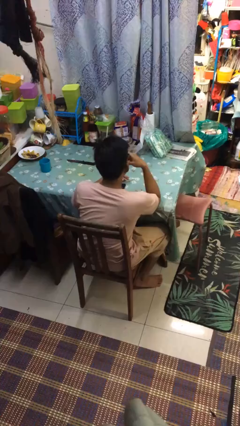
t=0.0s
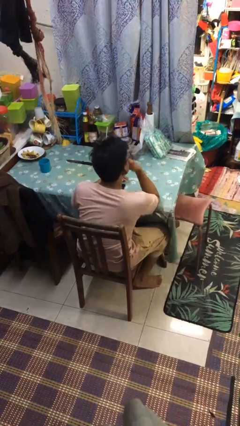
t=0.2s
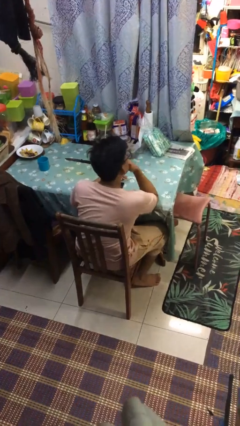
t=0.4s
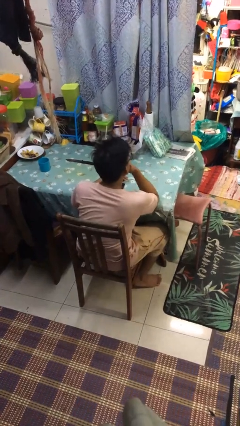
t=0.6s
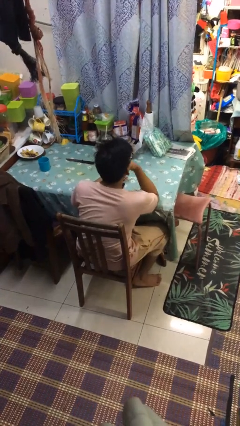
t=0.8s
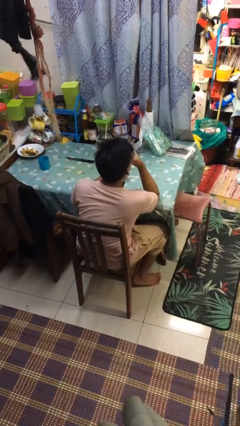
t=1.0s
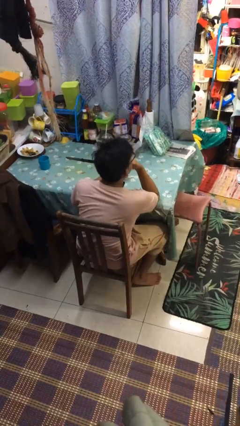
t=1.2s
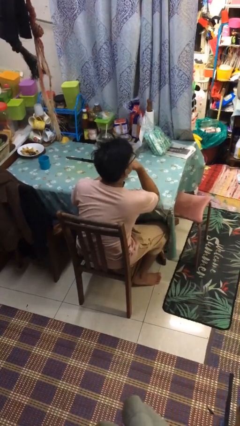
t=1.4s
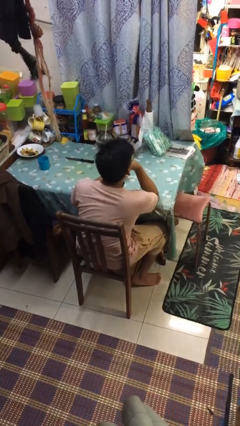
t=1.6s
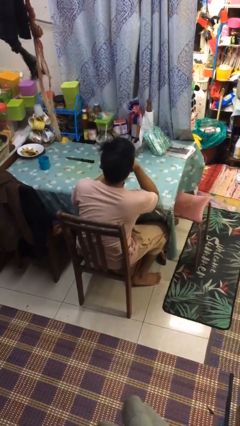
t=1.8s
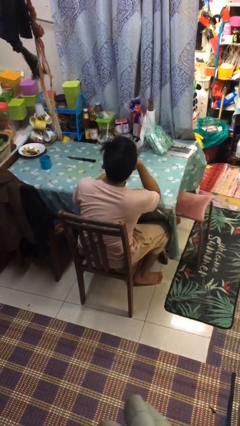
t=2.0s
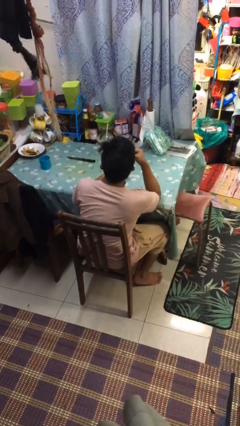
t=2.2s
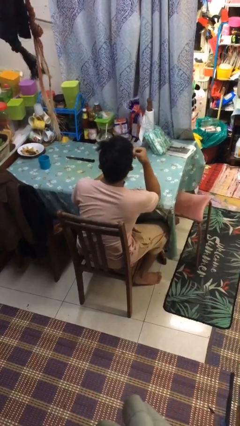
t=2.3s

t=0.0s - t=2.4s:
person strokes chin

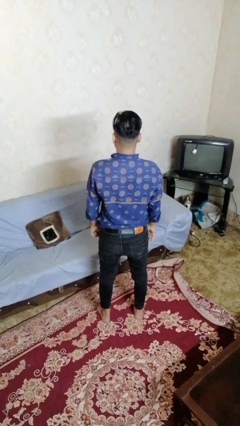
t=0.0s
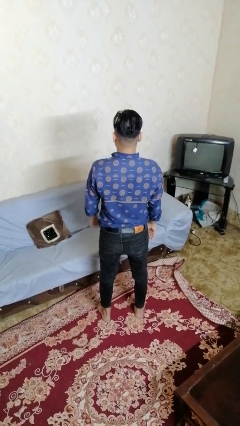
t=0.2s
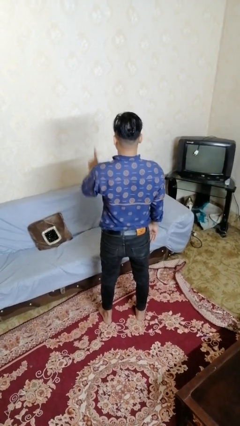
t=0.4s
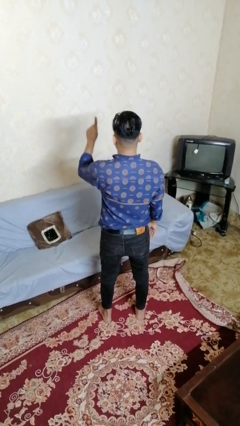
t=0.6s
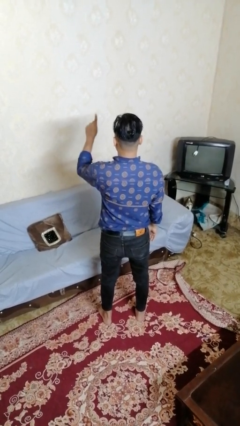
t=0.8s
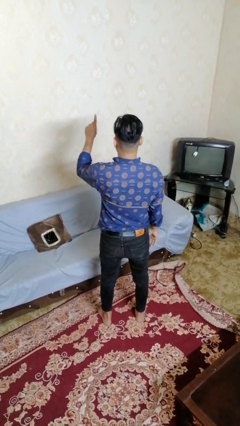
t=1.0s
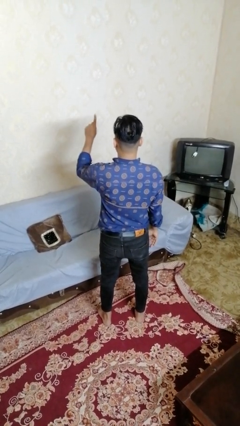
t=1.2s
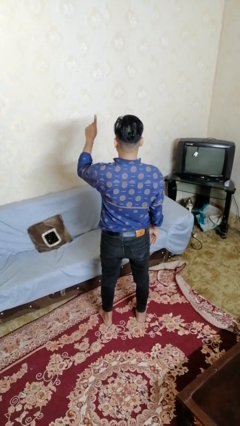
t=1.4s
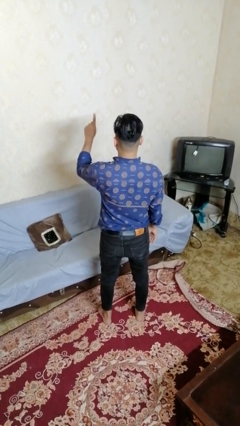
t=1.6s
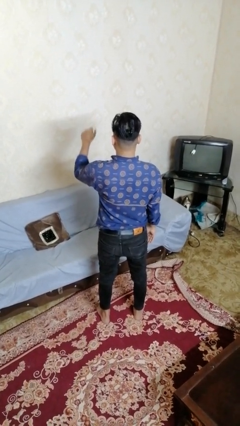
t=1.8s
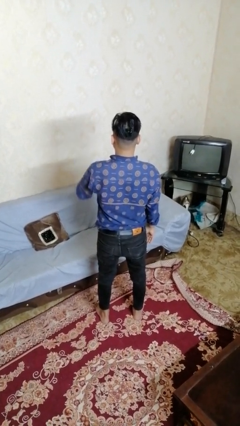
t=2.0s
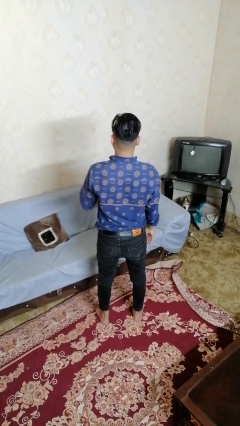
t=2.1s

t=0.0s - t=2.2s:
person gestures number one

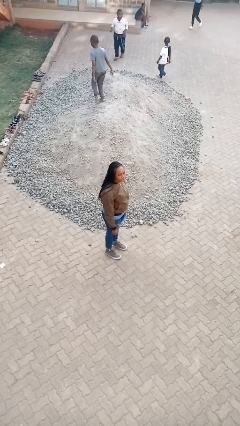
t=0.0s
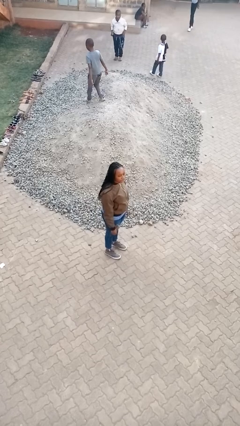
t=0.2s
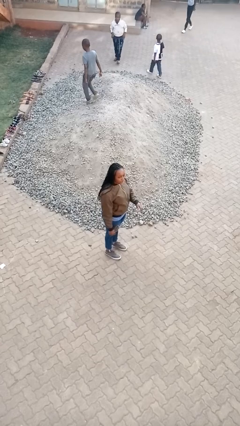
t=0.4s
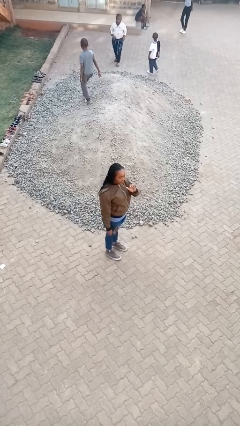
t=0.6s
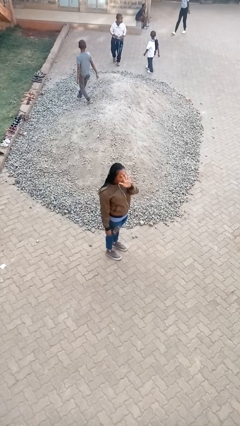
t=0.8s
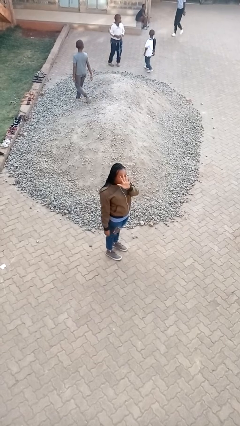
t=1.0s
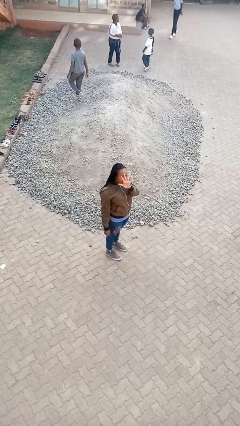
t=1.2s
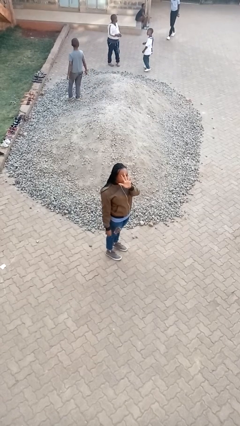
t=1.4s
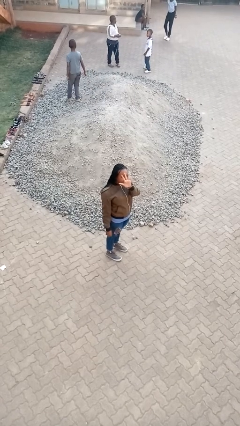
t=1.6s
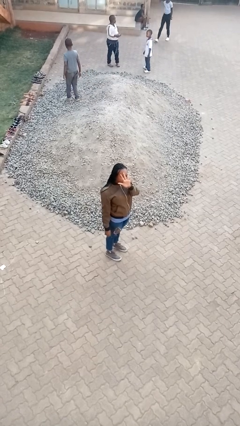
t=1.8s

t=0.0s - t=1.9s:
person gestures number five

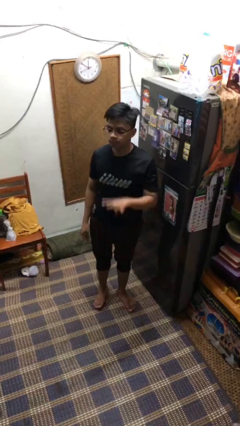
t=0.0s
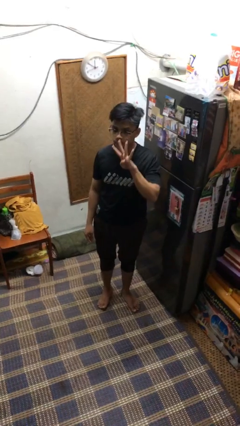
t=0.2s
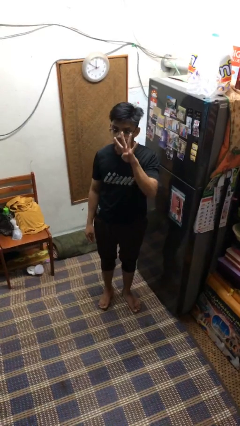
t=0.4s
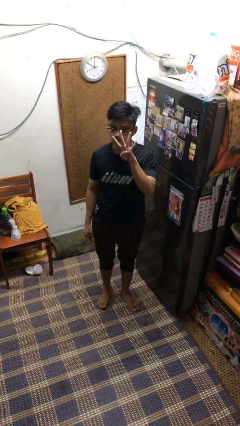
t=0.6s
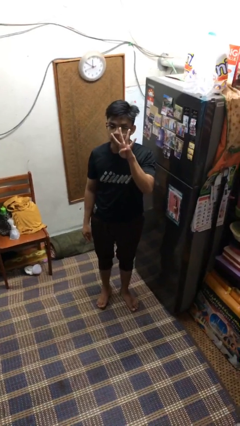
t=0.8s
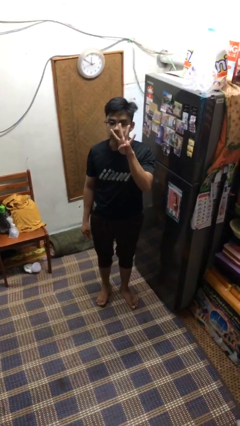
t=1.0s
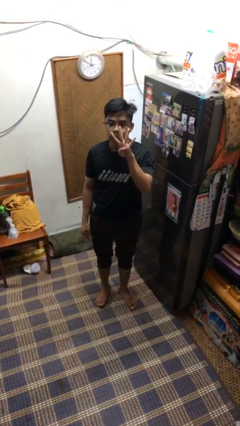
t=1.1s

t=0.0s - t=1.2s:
person gestures number four

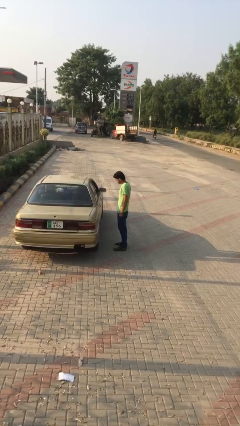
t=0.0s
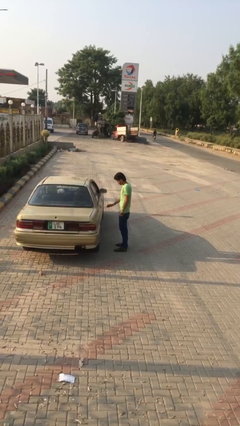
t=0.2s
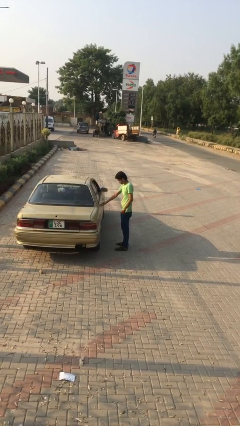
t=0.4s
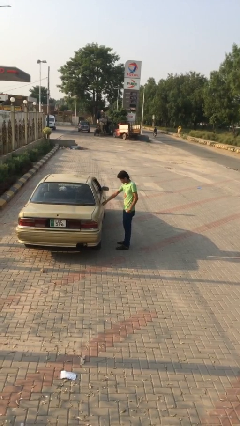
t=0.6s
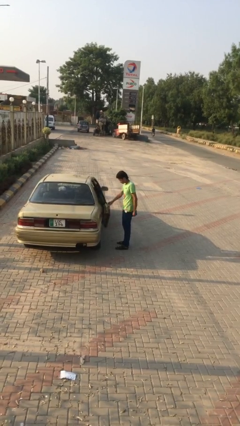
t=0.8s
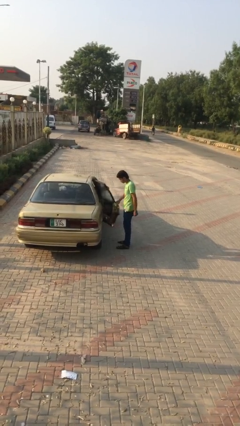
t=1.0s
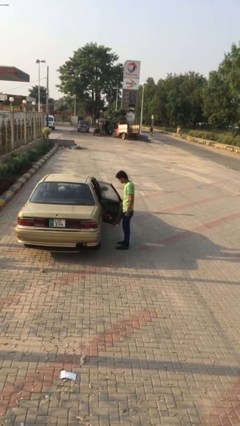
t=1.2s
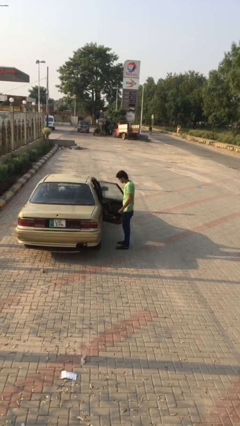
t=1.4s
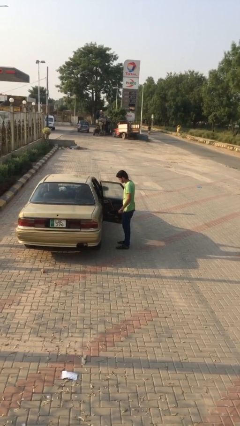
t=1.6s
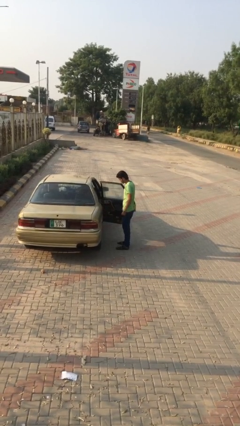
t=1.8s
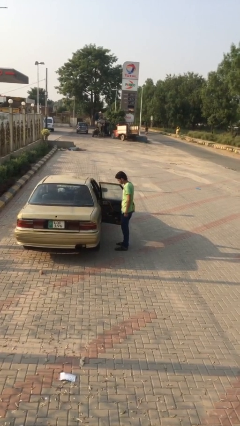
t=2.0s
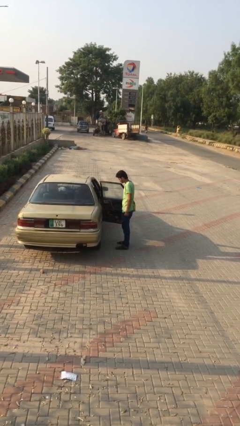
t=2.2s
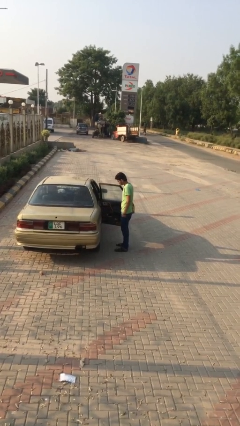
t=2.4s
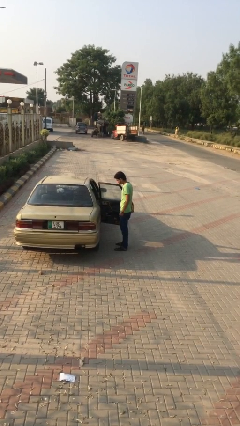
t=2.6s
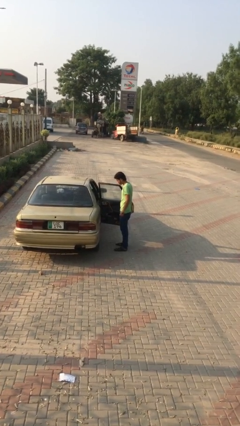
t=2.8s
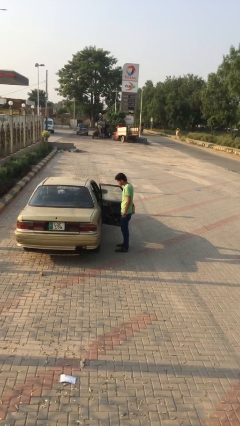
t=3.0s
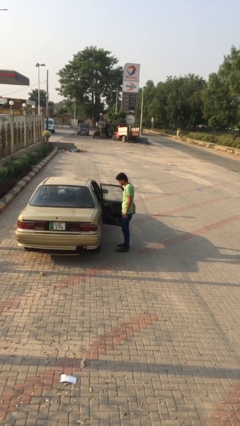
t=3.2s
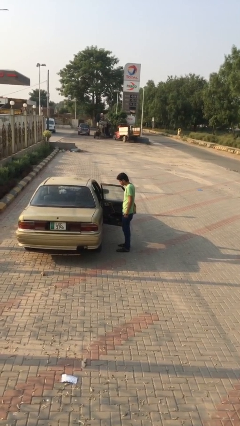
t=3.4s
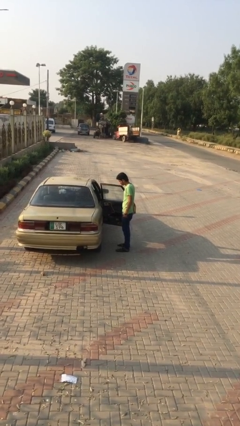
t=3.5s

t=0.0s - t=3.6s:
person opens car door

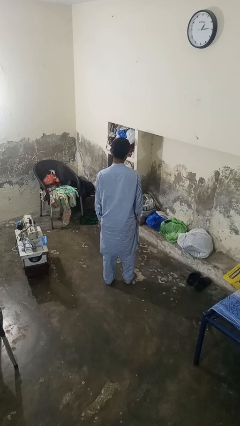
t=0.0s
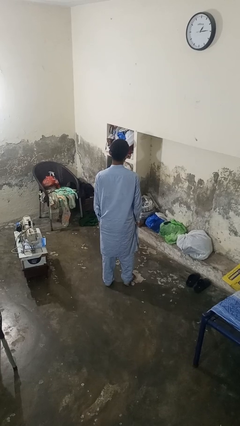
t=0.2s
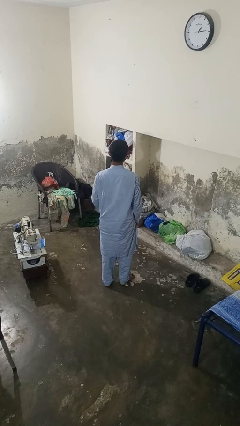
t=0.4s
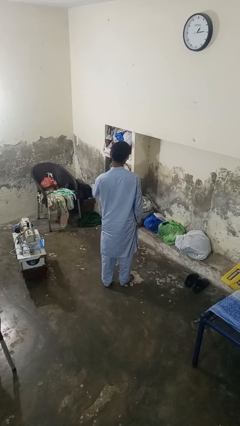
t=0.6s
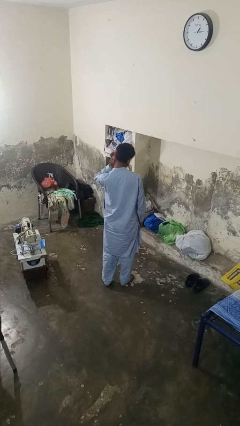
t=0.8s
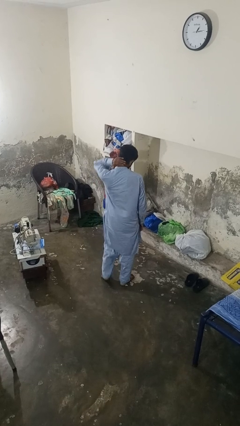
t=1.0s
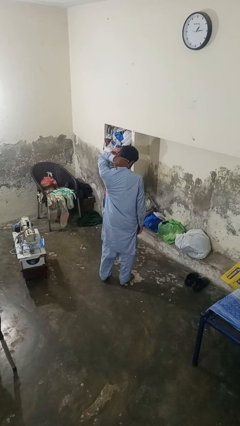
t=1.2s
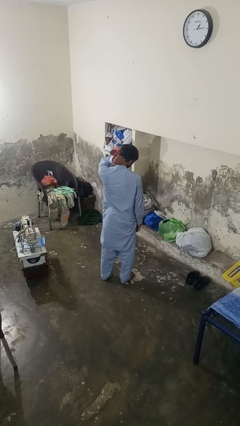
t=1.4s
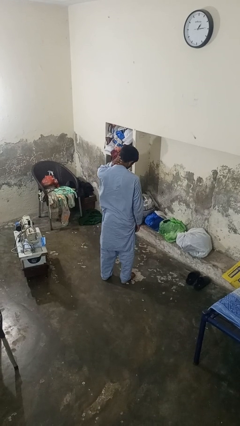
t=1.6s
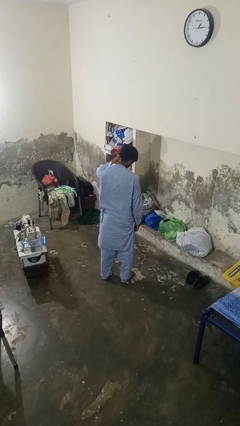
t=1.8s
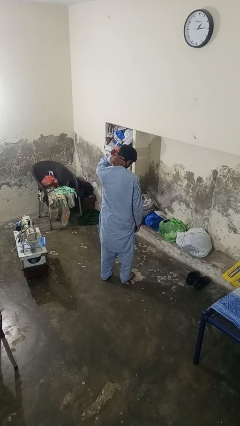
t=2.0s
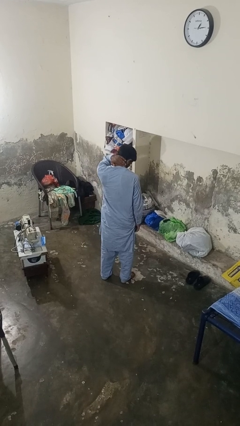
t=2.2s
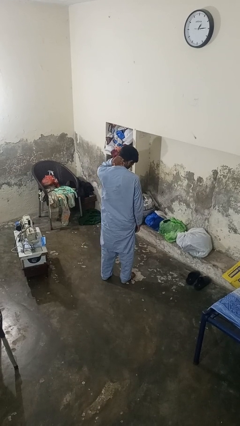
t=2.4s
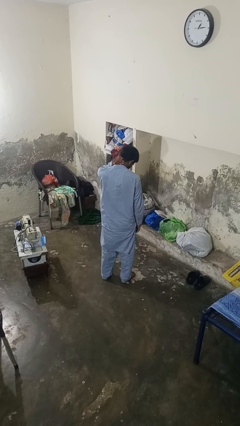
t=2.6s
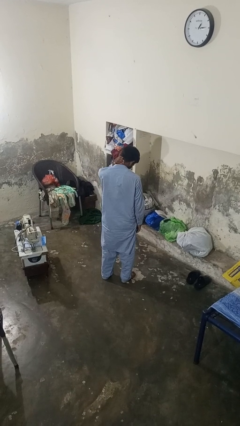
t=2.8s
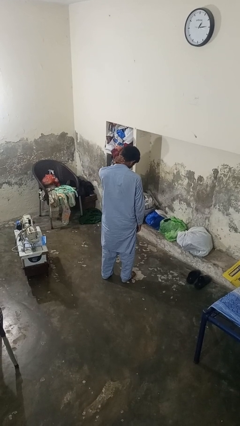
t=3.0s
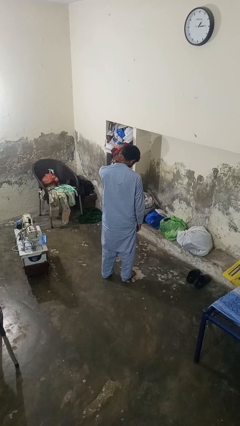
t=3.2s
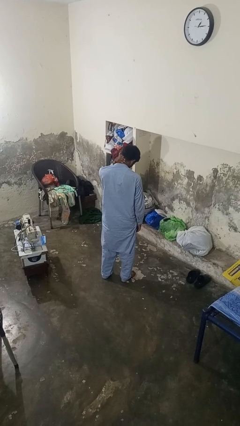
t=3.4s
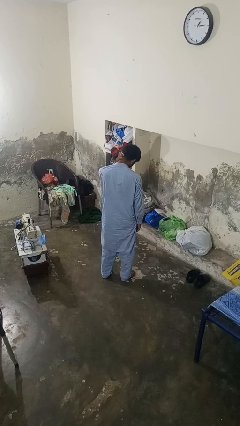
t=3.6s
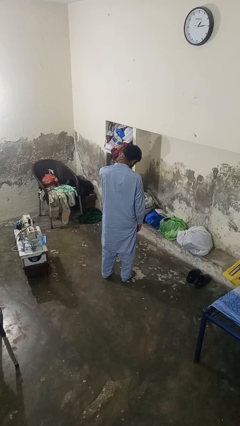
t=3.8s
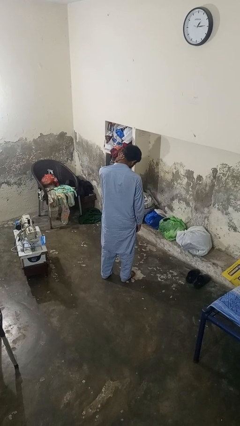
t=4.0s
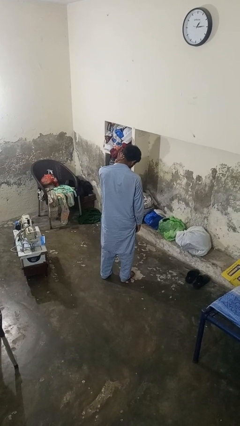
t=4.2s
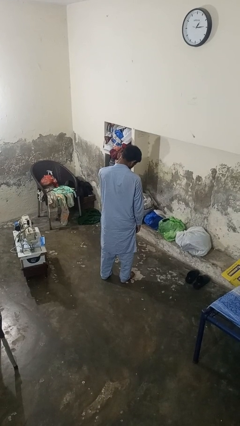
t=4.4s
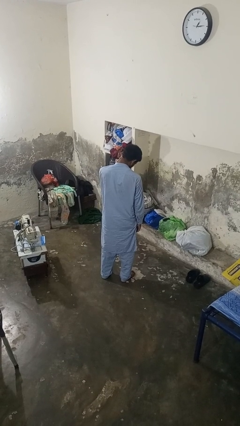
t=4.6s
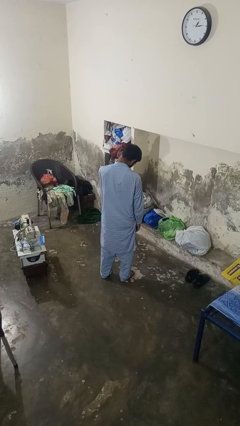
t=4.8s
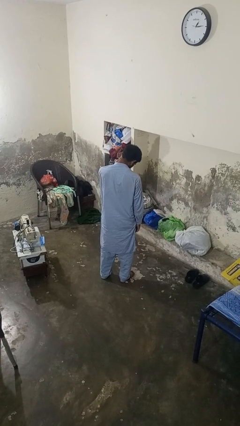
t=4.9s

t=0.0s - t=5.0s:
person rubs neck

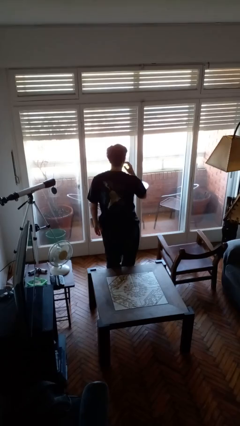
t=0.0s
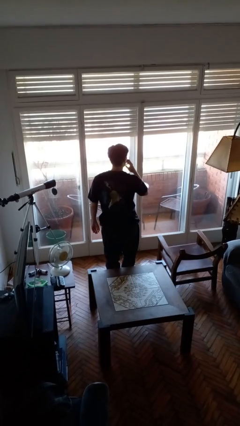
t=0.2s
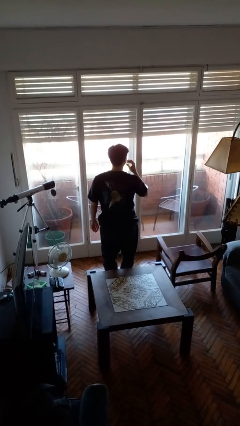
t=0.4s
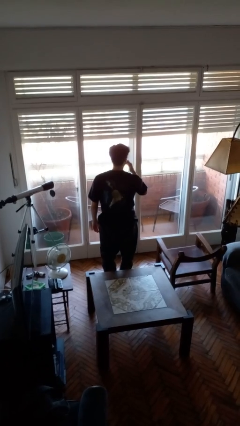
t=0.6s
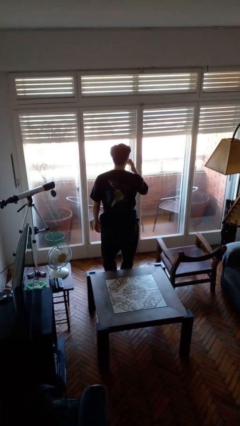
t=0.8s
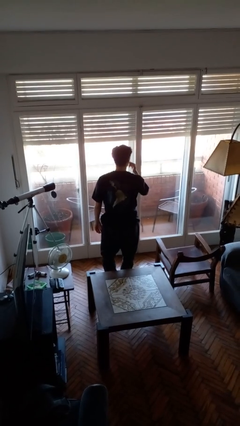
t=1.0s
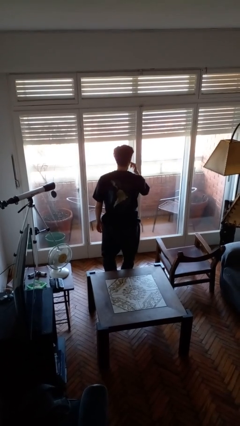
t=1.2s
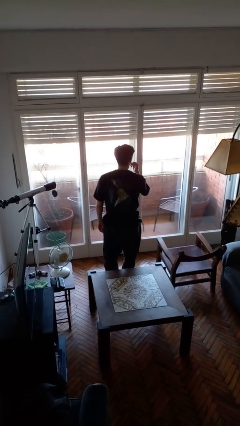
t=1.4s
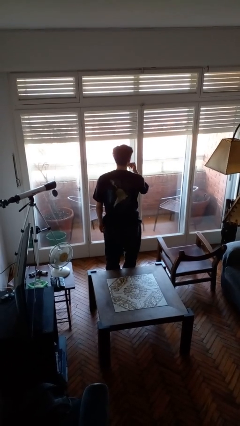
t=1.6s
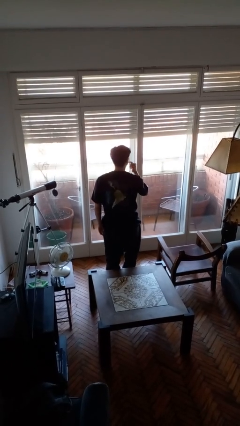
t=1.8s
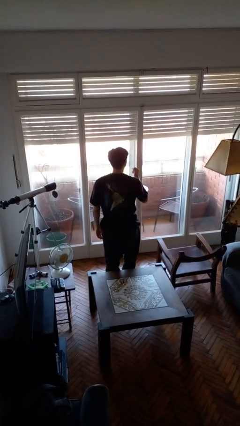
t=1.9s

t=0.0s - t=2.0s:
person licks fingers
